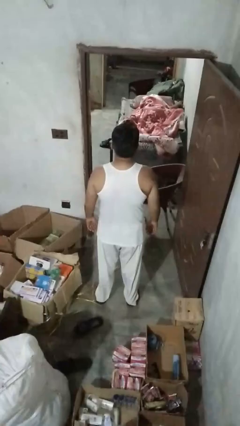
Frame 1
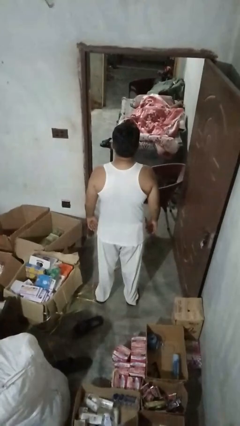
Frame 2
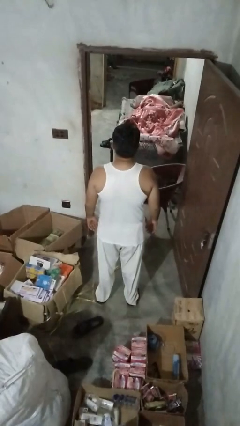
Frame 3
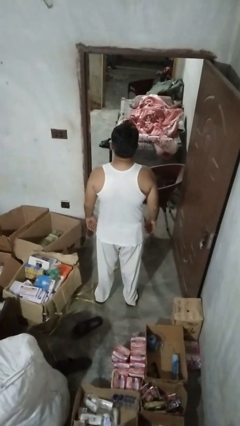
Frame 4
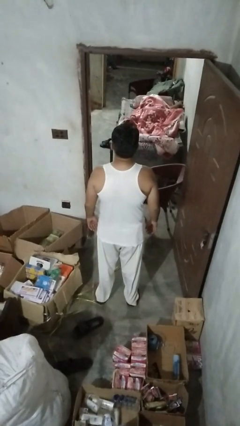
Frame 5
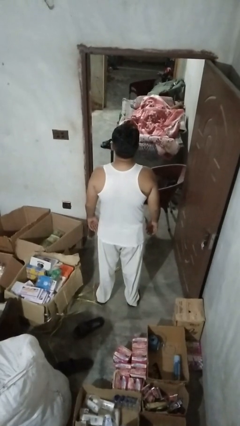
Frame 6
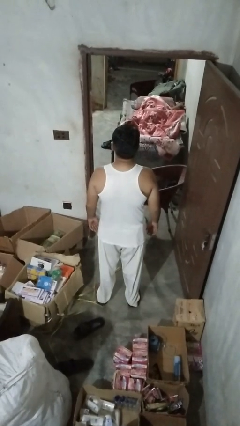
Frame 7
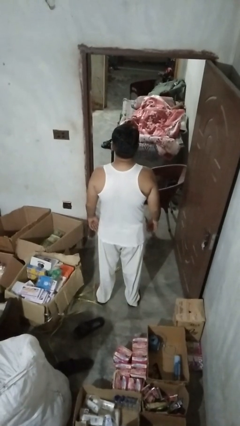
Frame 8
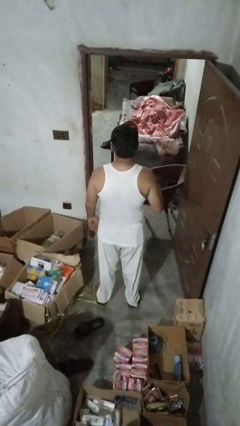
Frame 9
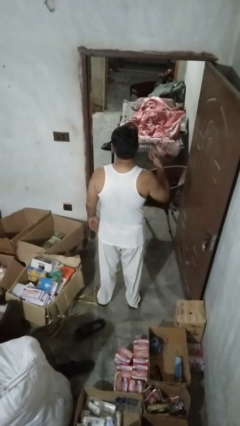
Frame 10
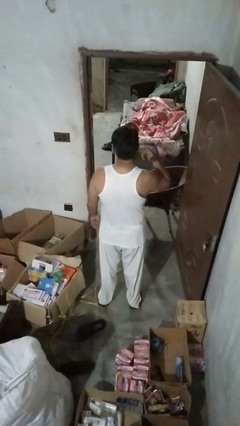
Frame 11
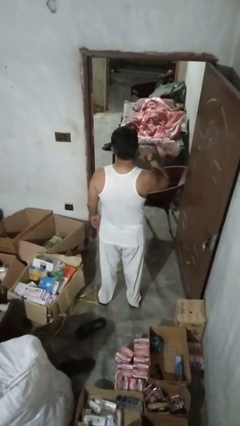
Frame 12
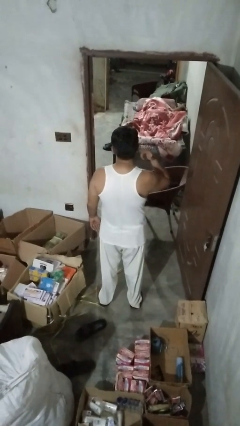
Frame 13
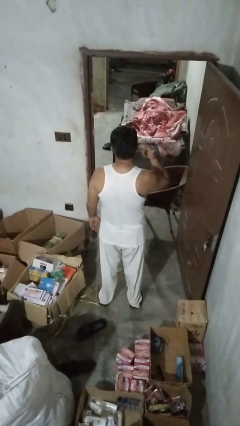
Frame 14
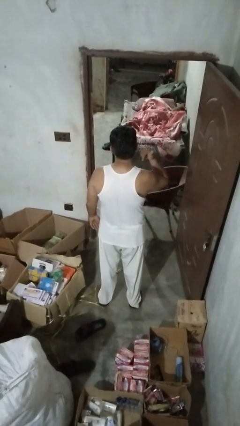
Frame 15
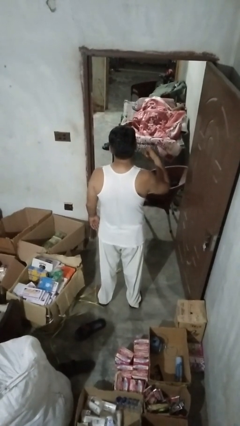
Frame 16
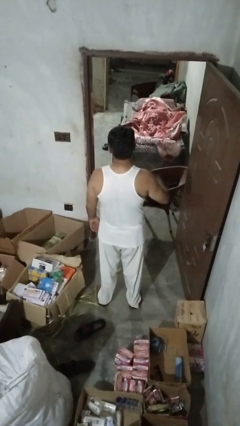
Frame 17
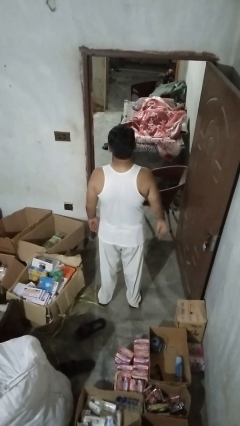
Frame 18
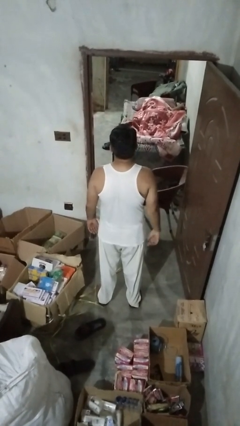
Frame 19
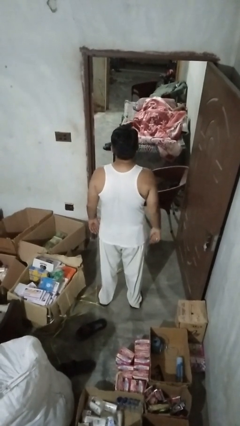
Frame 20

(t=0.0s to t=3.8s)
person touches earlobe

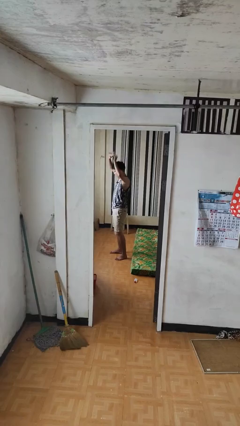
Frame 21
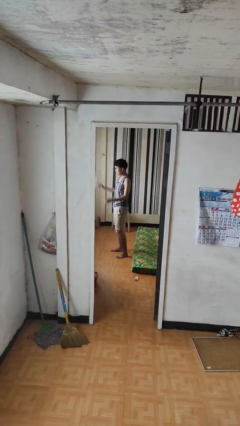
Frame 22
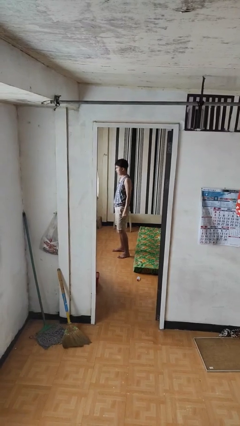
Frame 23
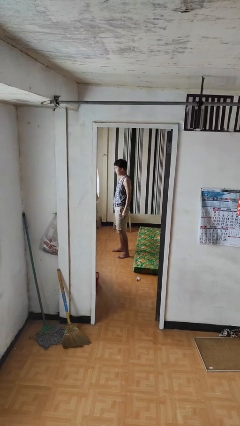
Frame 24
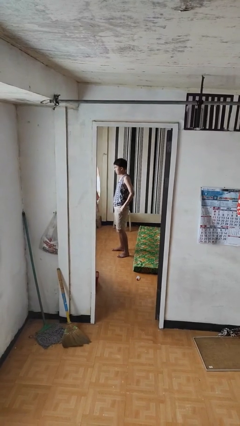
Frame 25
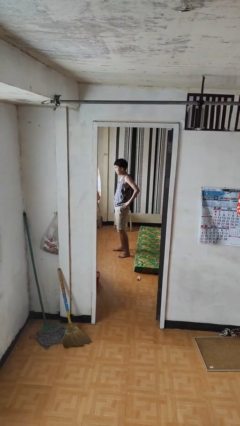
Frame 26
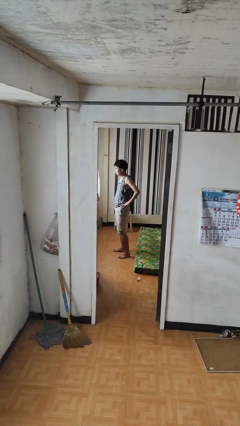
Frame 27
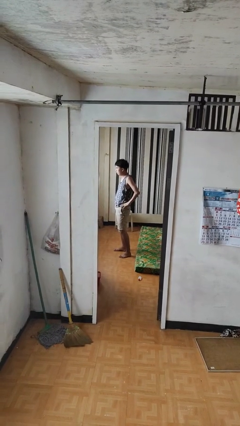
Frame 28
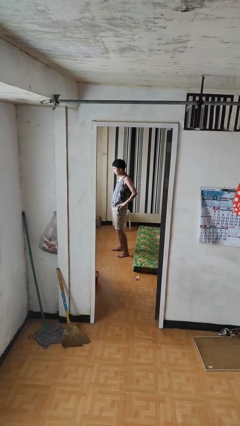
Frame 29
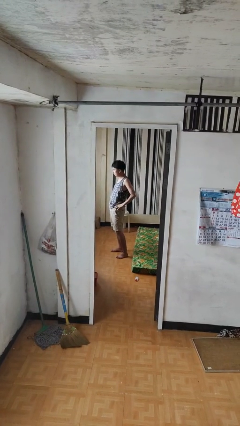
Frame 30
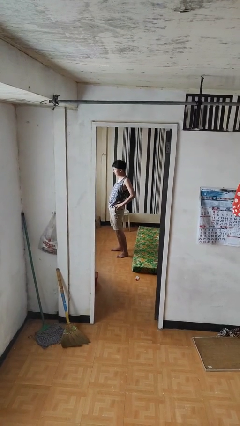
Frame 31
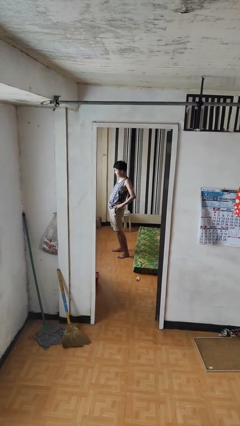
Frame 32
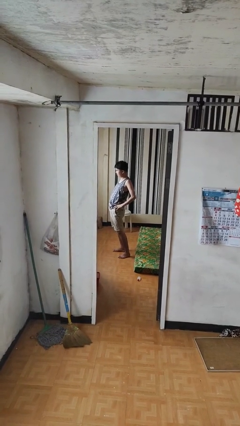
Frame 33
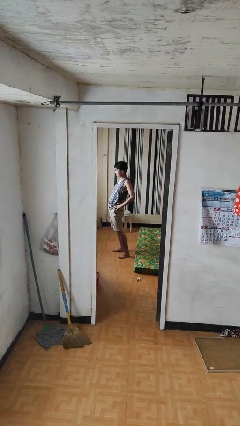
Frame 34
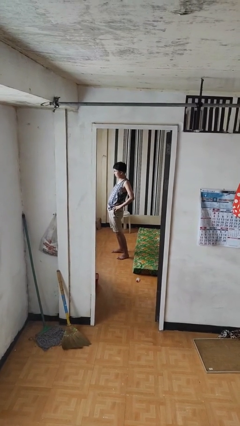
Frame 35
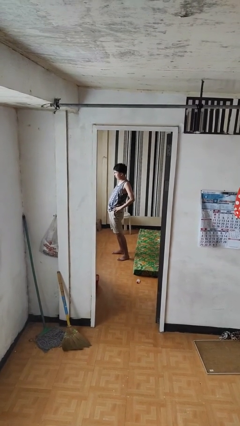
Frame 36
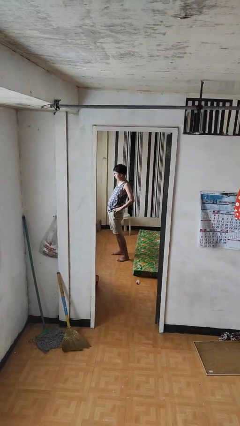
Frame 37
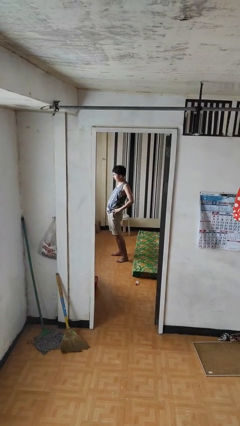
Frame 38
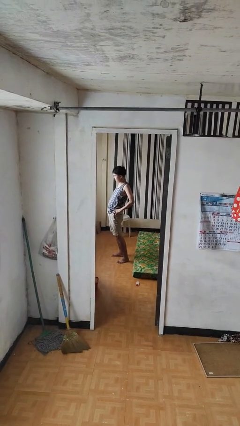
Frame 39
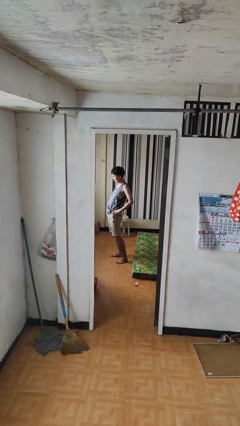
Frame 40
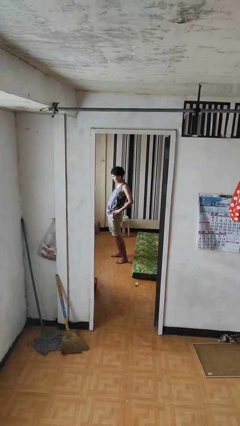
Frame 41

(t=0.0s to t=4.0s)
person stretches back

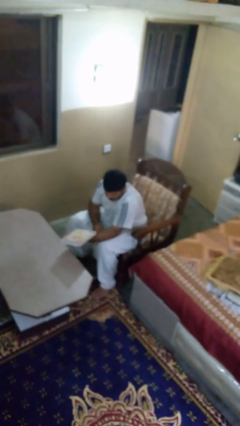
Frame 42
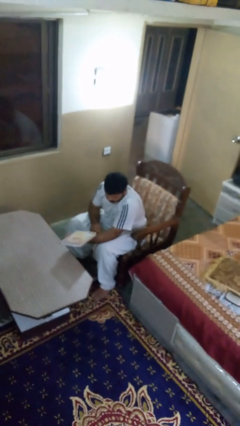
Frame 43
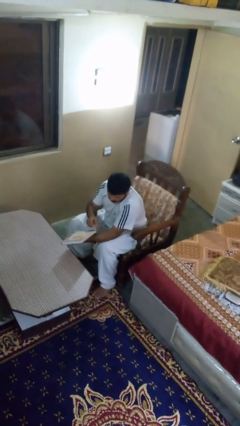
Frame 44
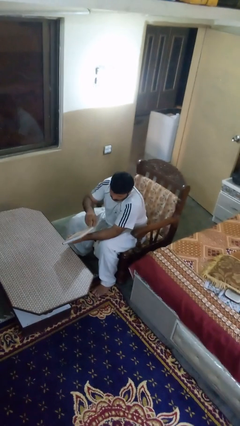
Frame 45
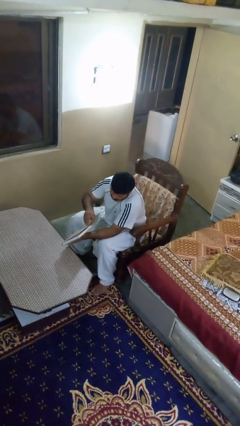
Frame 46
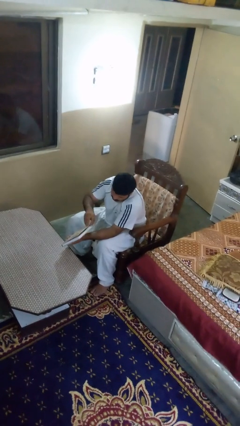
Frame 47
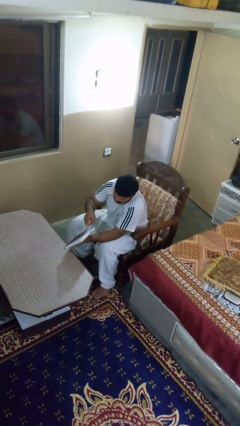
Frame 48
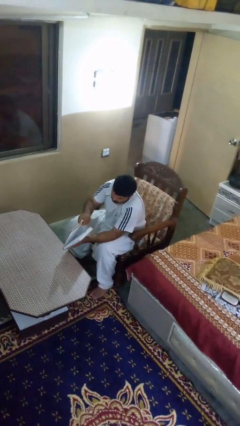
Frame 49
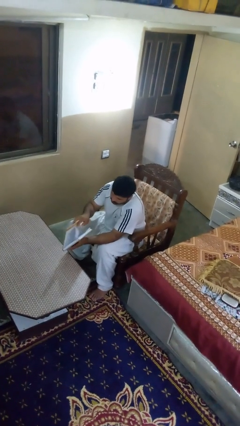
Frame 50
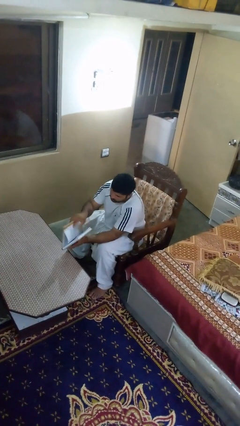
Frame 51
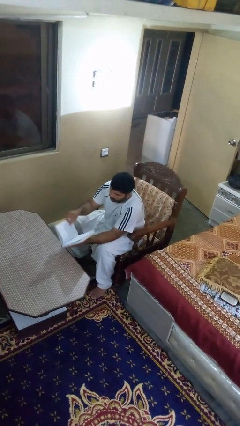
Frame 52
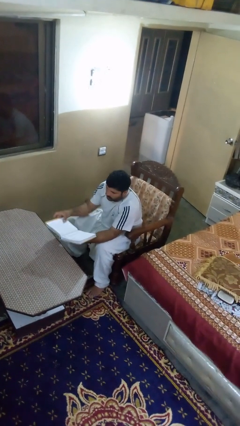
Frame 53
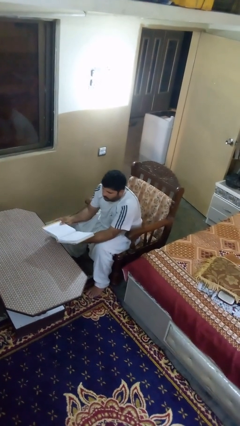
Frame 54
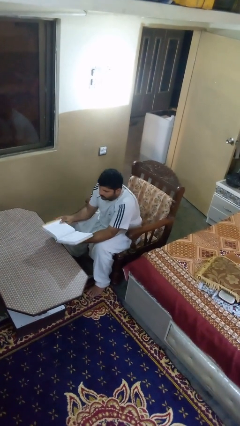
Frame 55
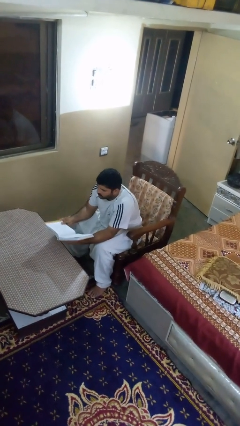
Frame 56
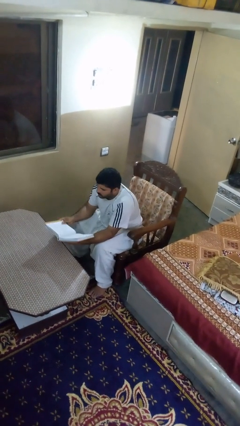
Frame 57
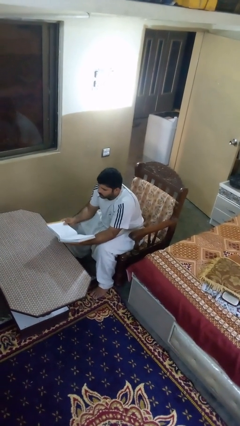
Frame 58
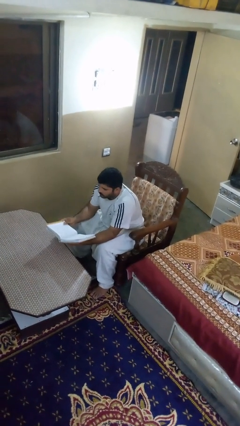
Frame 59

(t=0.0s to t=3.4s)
person reads book

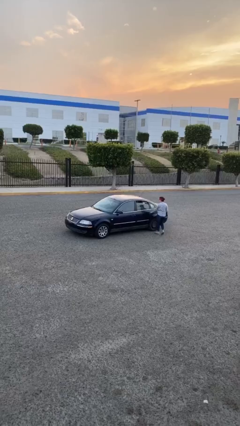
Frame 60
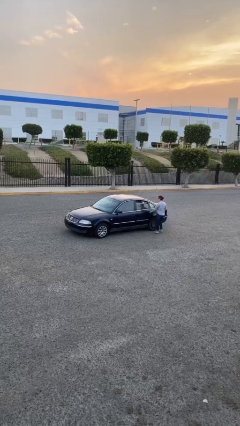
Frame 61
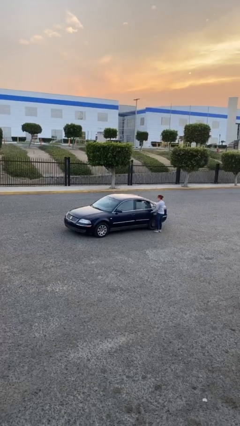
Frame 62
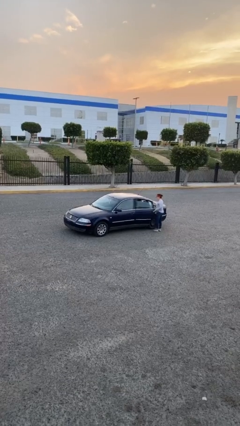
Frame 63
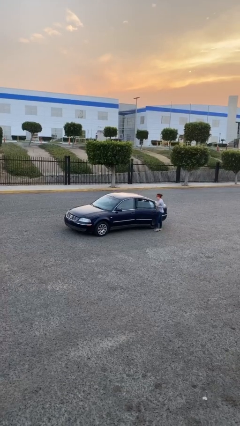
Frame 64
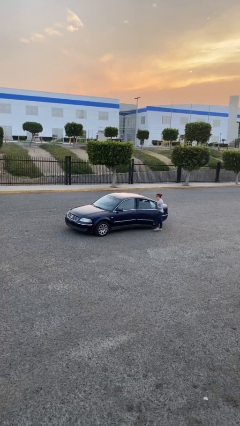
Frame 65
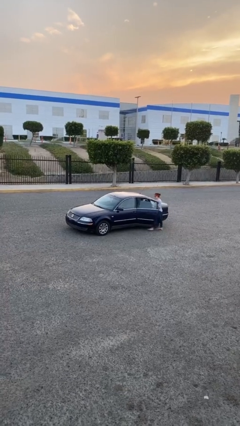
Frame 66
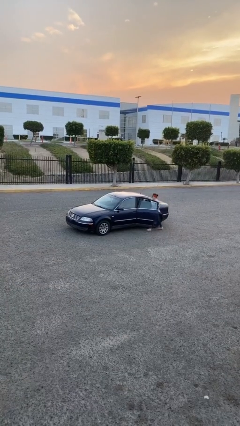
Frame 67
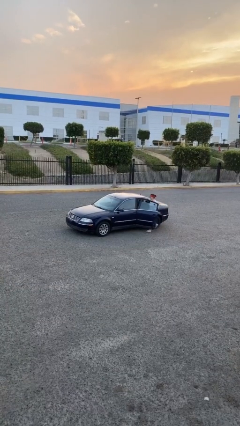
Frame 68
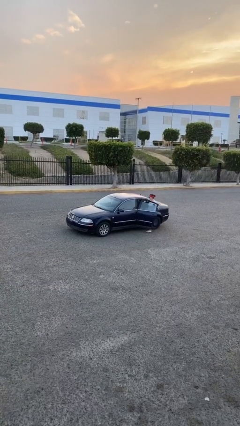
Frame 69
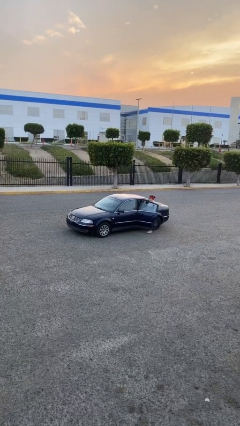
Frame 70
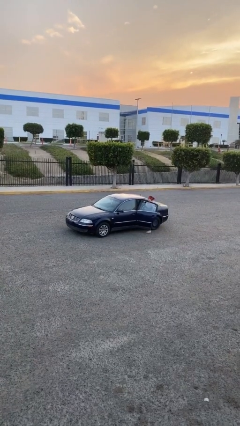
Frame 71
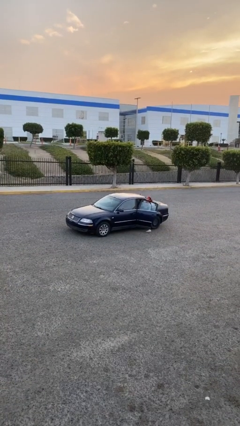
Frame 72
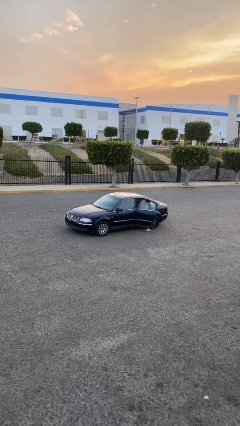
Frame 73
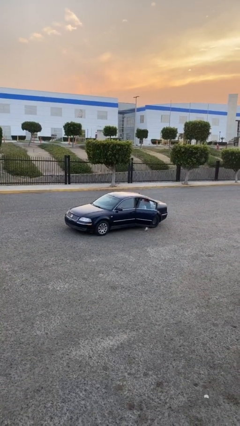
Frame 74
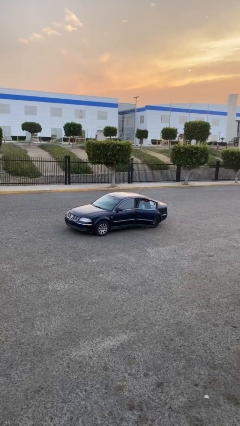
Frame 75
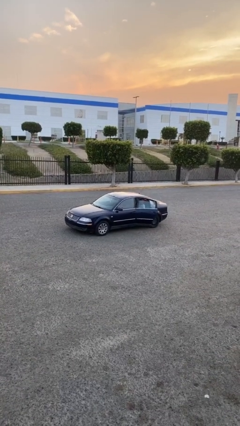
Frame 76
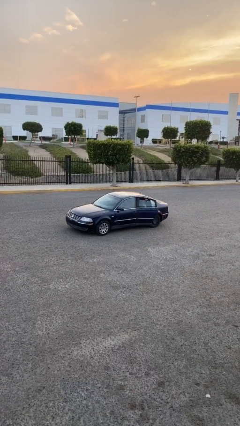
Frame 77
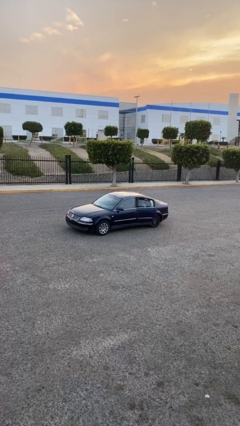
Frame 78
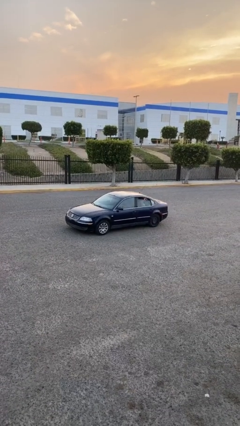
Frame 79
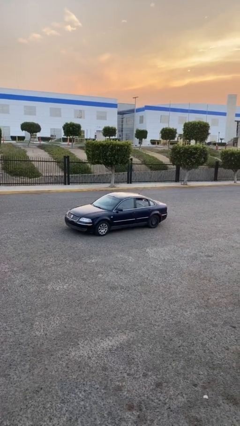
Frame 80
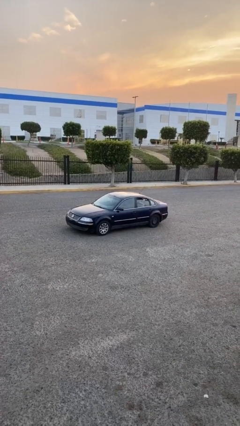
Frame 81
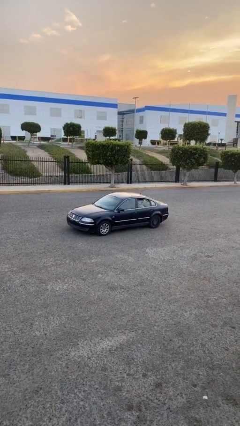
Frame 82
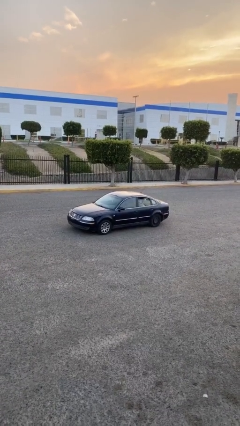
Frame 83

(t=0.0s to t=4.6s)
car picks up person

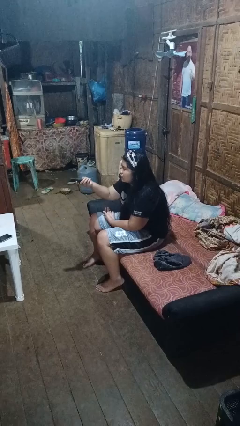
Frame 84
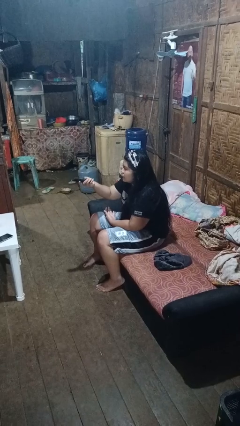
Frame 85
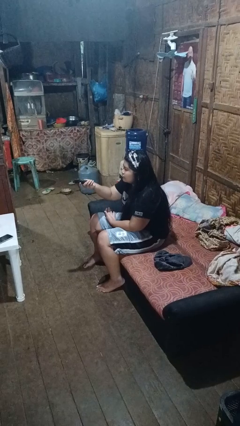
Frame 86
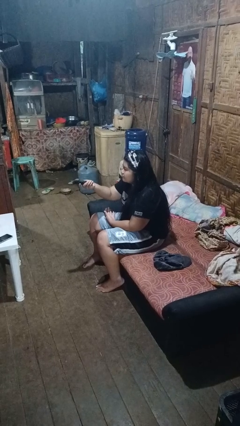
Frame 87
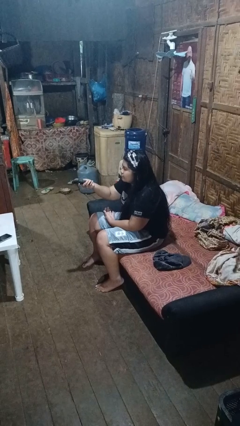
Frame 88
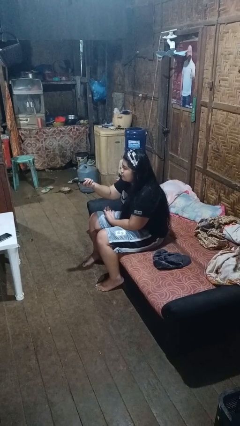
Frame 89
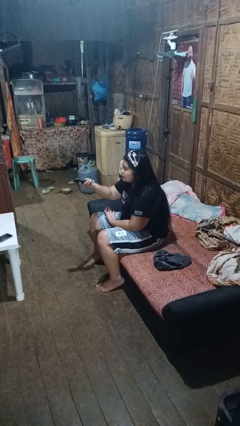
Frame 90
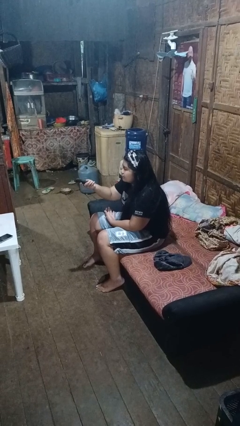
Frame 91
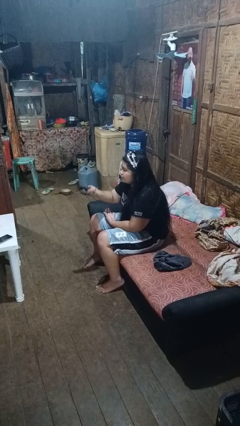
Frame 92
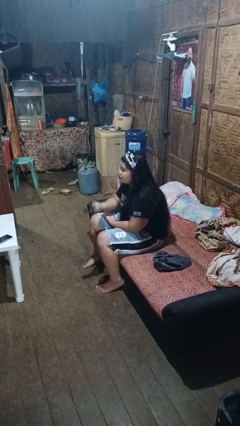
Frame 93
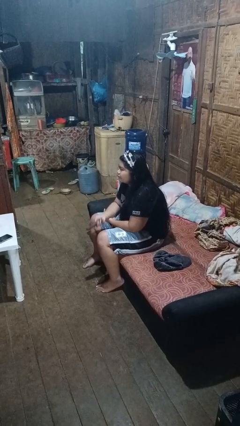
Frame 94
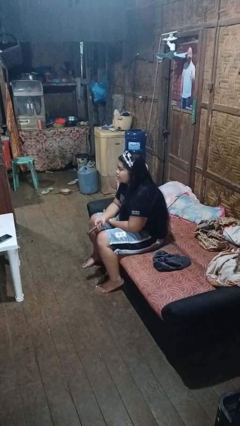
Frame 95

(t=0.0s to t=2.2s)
person uses television remote
